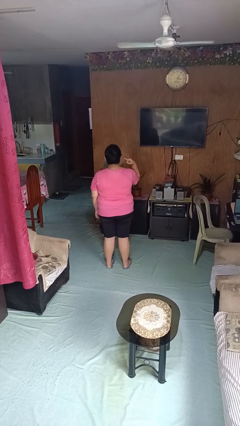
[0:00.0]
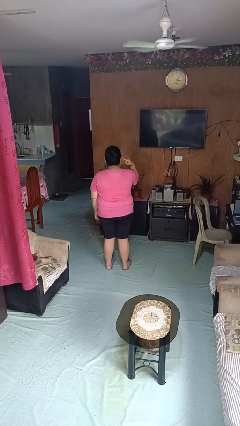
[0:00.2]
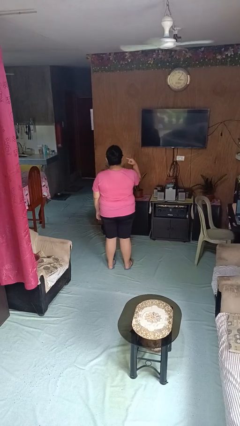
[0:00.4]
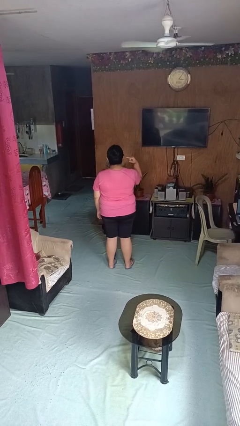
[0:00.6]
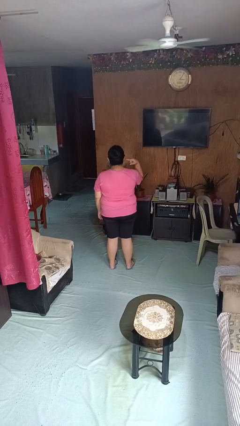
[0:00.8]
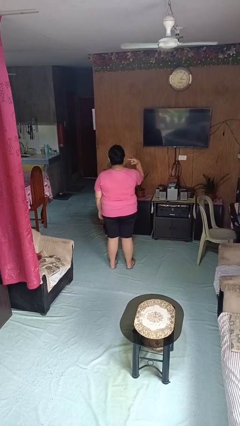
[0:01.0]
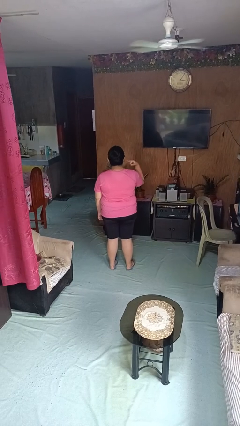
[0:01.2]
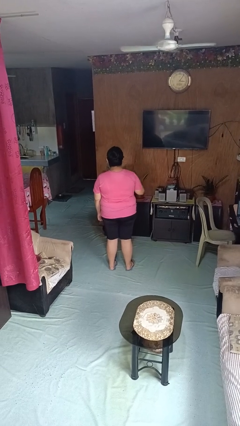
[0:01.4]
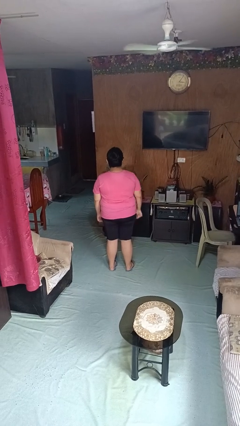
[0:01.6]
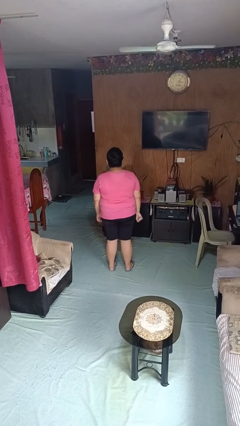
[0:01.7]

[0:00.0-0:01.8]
person gestures listen closely

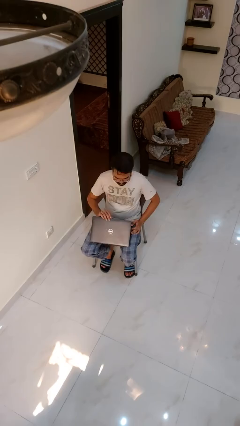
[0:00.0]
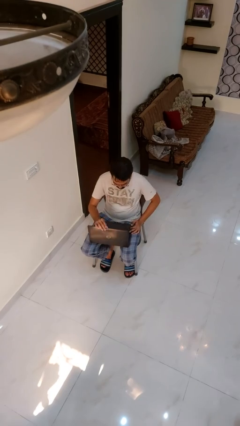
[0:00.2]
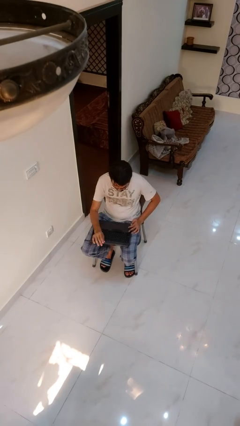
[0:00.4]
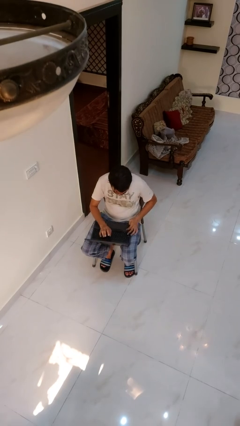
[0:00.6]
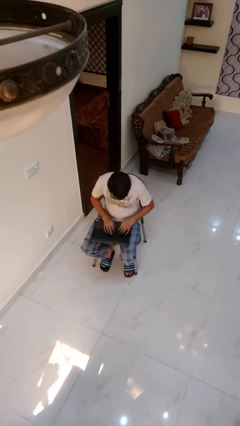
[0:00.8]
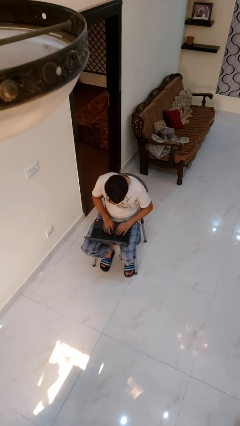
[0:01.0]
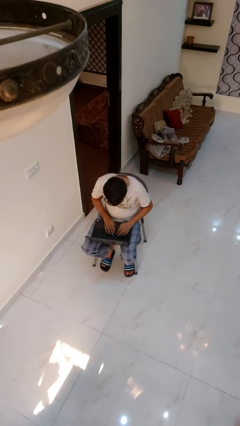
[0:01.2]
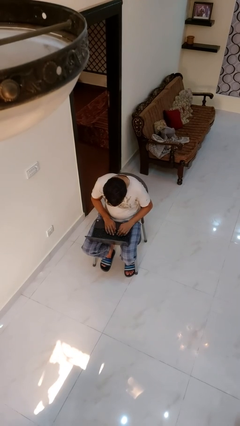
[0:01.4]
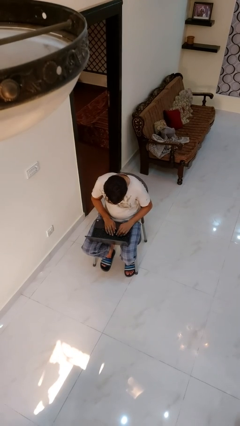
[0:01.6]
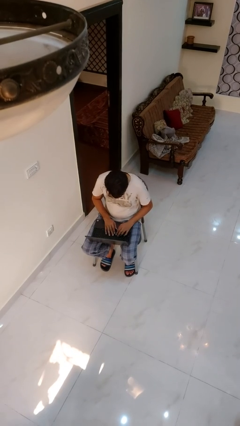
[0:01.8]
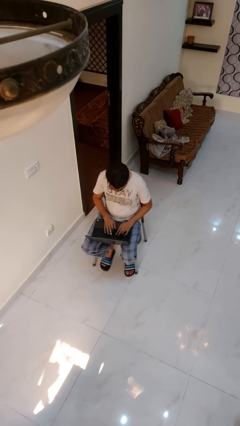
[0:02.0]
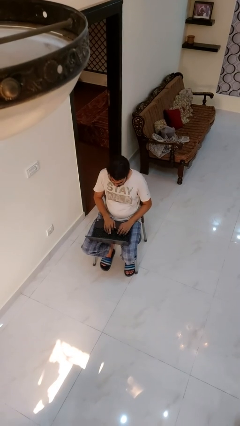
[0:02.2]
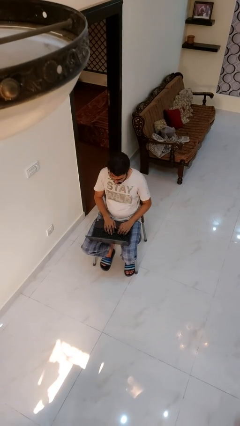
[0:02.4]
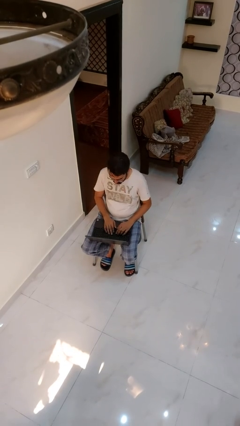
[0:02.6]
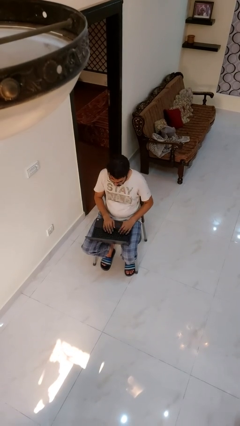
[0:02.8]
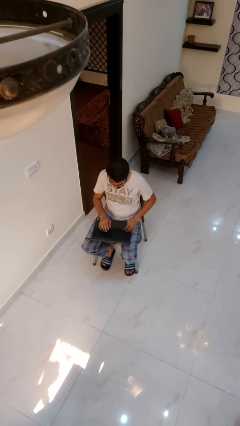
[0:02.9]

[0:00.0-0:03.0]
person opens laptop

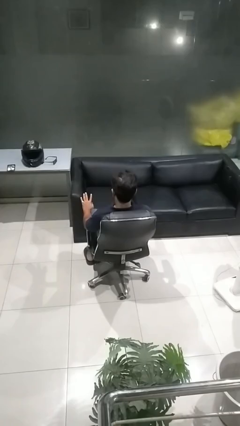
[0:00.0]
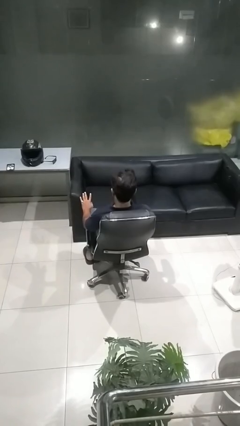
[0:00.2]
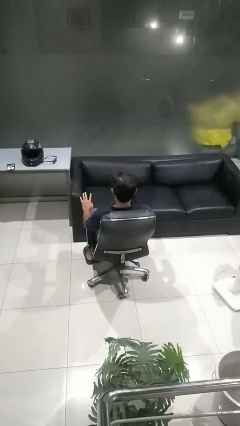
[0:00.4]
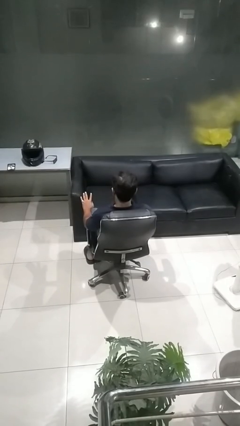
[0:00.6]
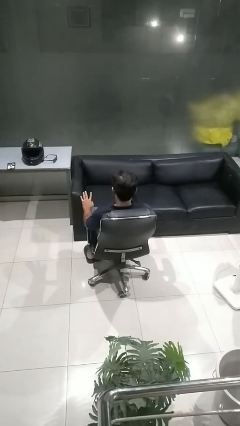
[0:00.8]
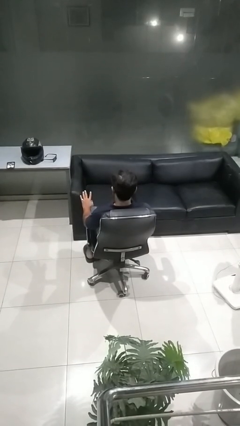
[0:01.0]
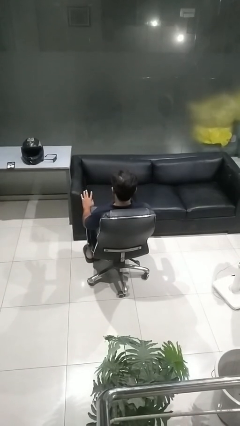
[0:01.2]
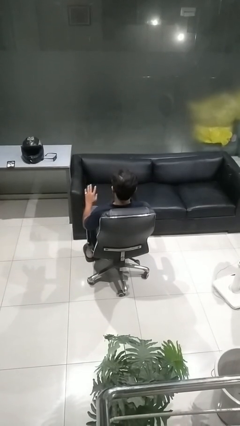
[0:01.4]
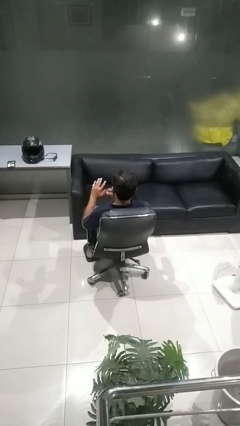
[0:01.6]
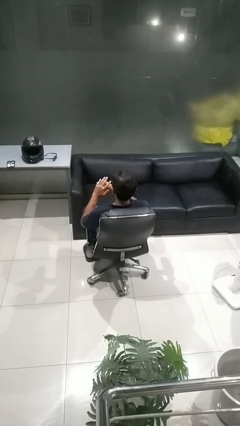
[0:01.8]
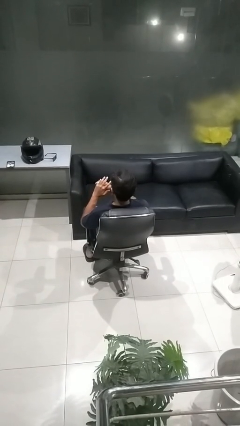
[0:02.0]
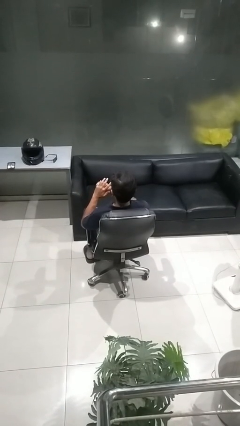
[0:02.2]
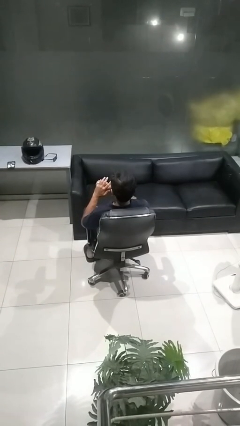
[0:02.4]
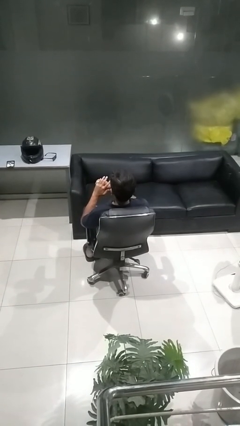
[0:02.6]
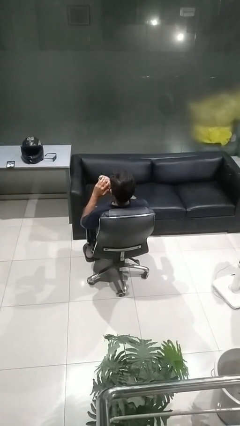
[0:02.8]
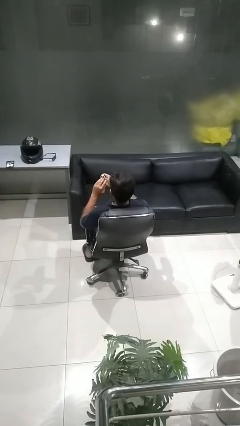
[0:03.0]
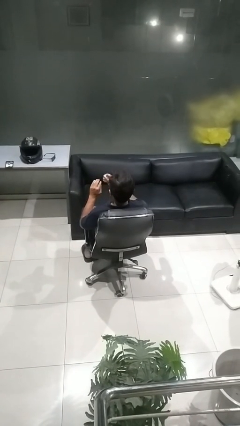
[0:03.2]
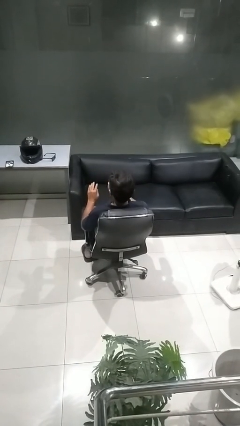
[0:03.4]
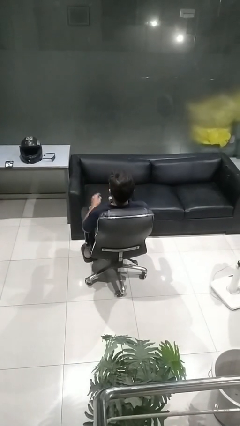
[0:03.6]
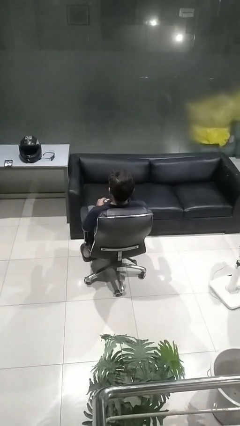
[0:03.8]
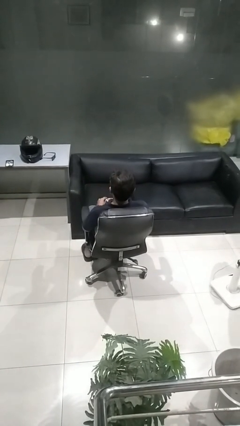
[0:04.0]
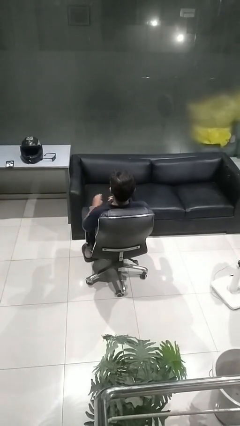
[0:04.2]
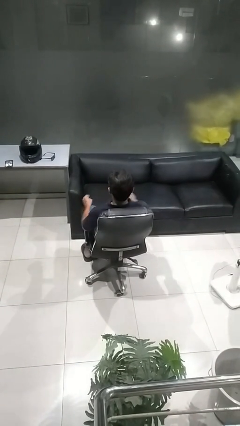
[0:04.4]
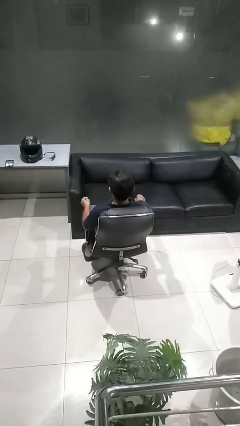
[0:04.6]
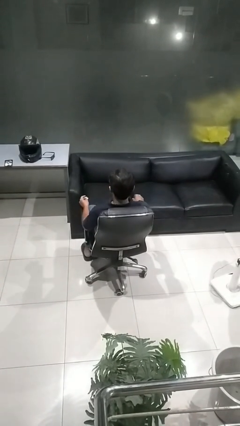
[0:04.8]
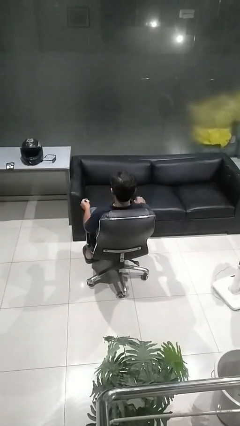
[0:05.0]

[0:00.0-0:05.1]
person takes off ring

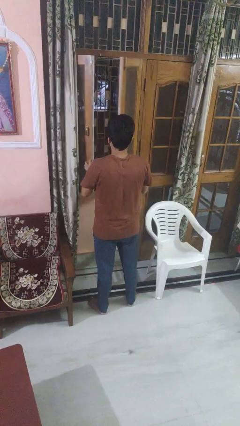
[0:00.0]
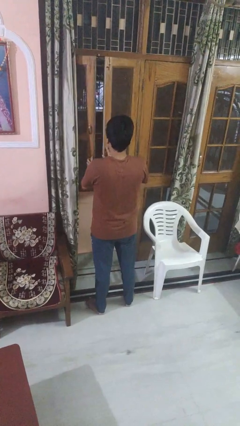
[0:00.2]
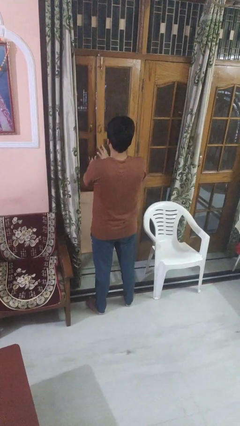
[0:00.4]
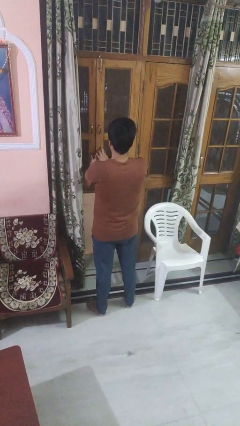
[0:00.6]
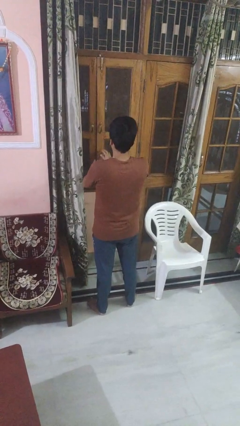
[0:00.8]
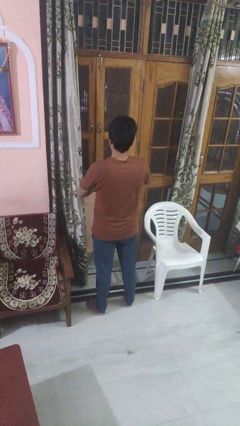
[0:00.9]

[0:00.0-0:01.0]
person closes home window

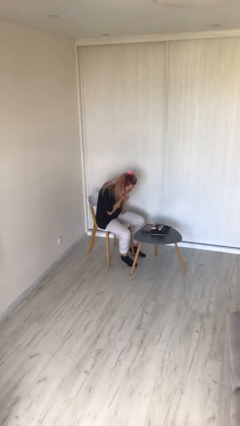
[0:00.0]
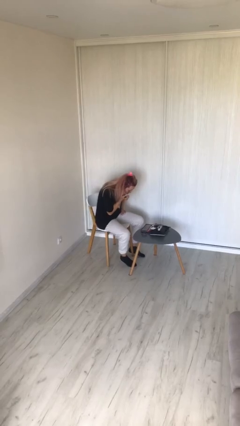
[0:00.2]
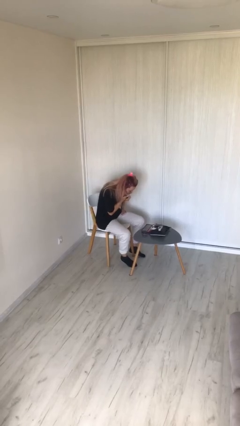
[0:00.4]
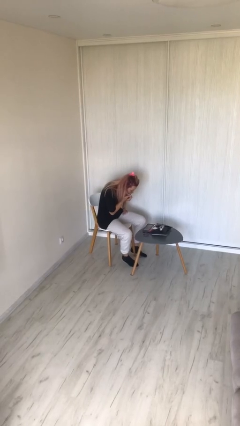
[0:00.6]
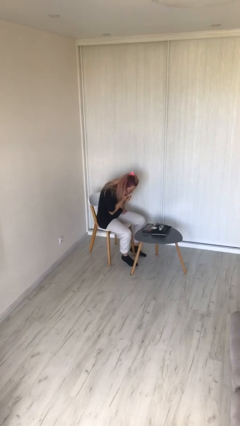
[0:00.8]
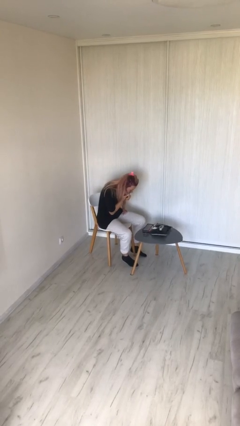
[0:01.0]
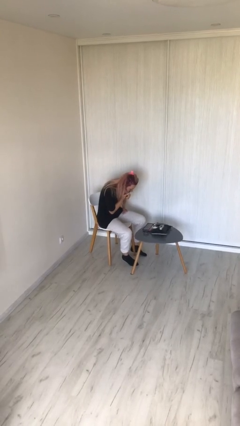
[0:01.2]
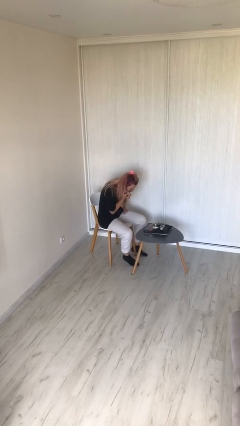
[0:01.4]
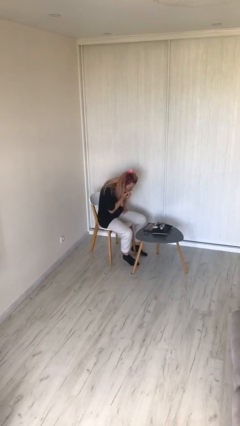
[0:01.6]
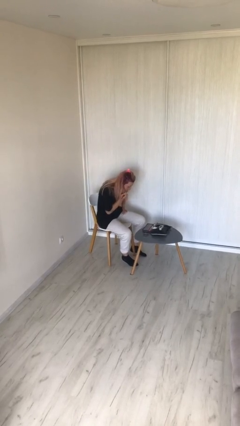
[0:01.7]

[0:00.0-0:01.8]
person applies eye makeup

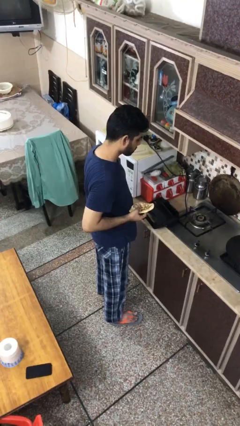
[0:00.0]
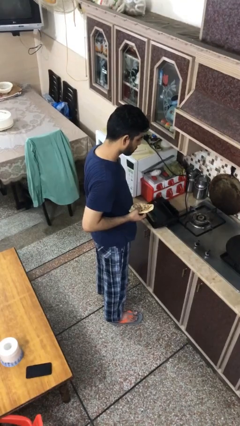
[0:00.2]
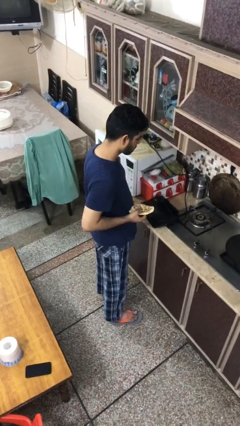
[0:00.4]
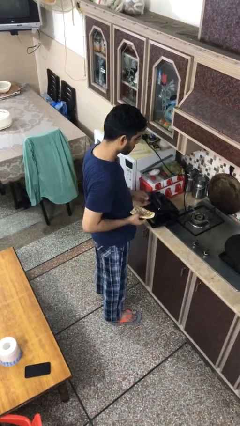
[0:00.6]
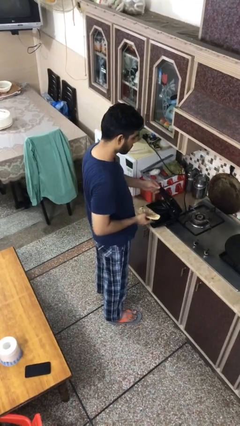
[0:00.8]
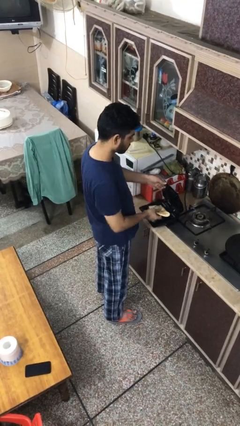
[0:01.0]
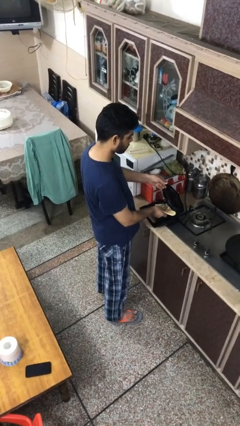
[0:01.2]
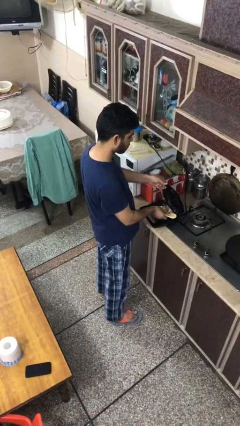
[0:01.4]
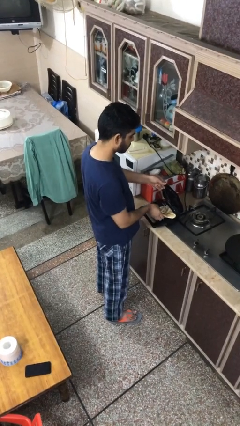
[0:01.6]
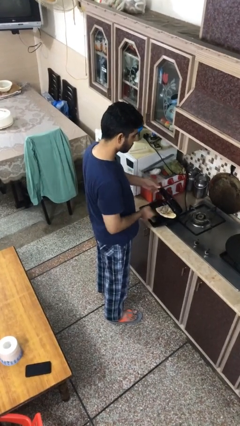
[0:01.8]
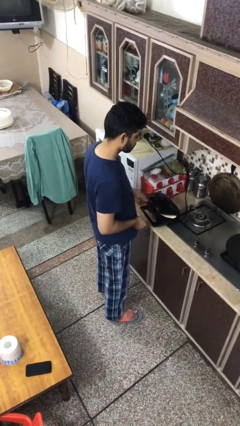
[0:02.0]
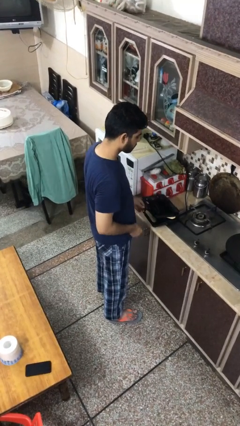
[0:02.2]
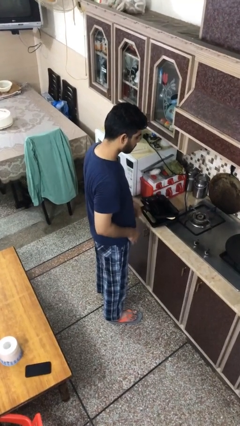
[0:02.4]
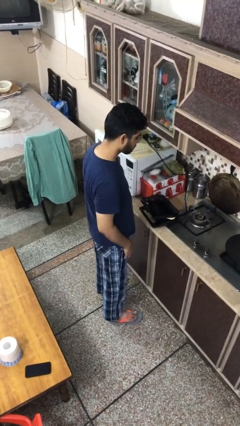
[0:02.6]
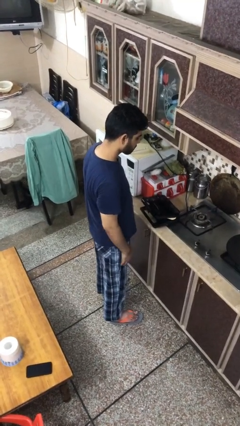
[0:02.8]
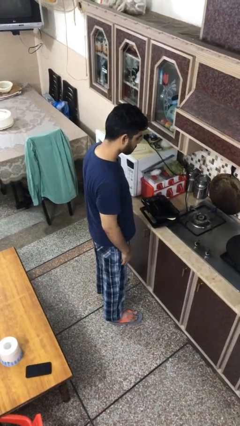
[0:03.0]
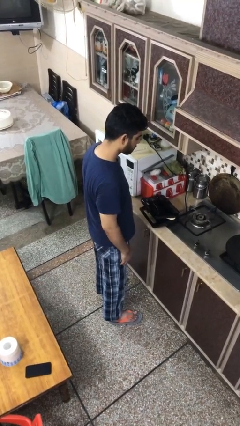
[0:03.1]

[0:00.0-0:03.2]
person puts object into toaster

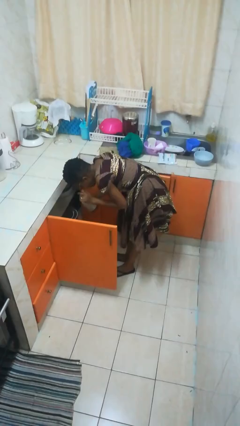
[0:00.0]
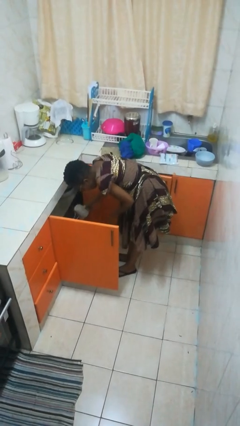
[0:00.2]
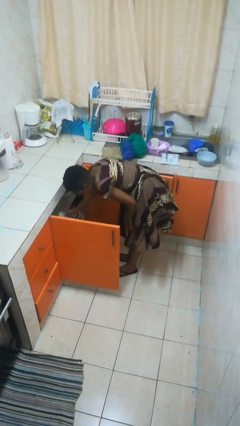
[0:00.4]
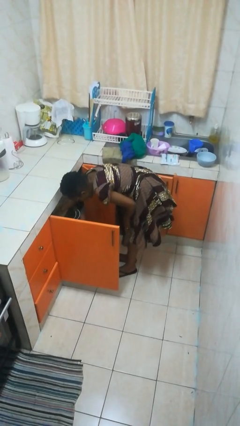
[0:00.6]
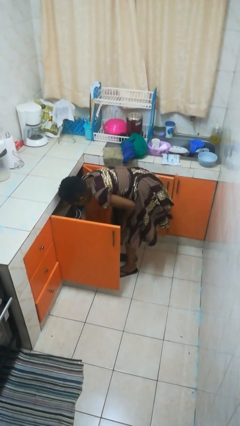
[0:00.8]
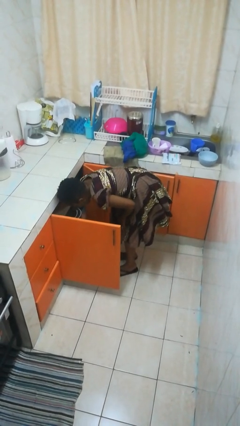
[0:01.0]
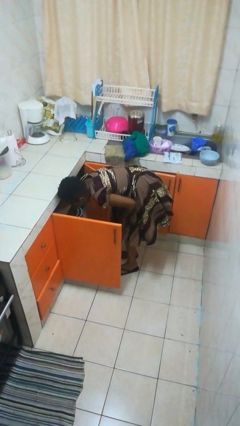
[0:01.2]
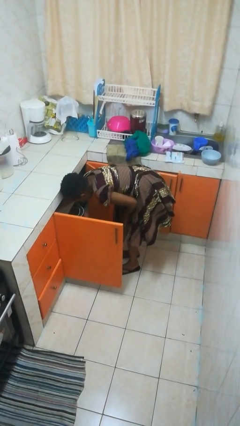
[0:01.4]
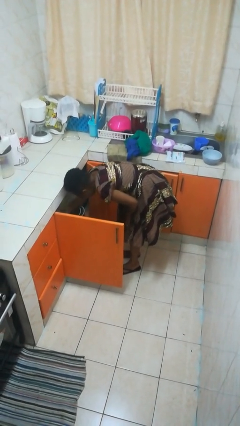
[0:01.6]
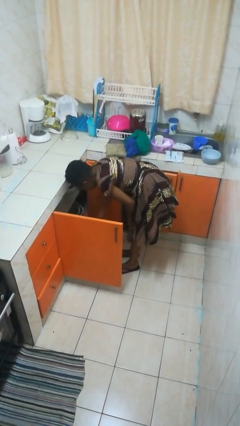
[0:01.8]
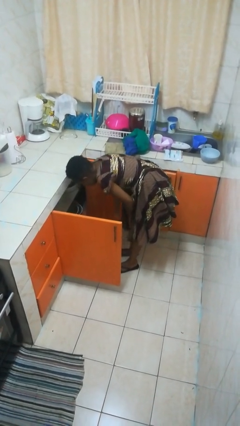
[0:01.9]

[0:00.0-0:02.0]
person puts object in cabinet
